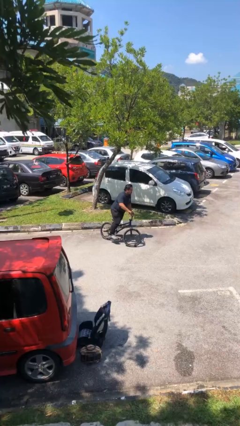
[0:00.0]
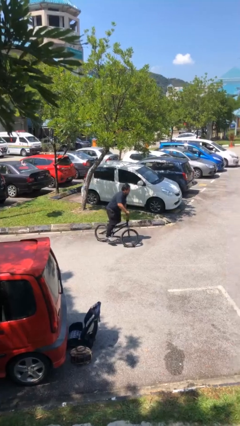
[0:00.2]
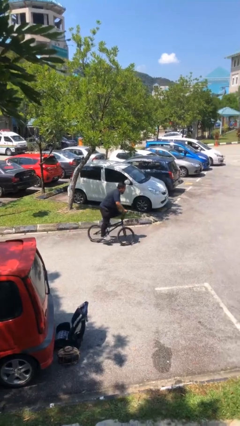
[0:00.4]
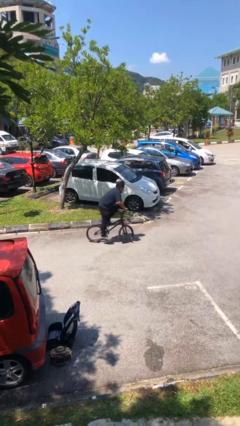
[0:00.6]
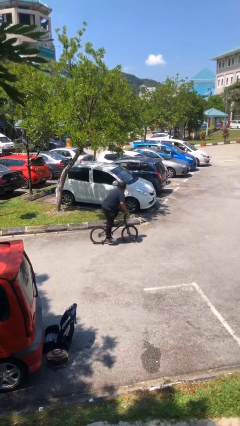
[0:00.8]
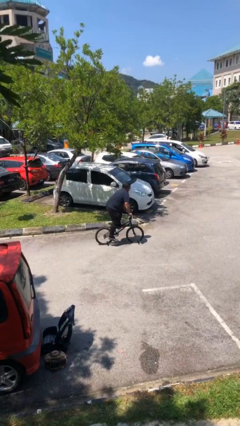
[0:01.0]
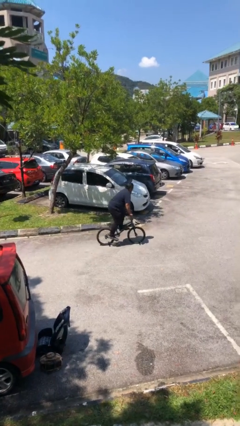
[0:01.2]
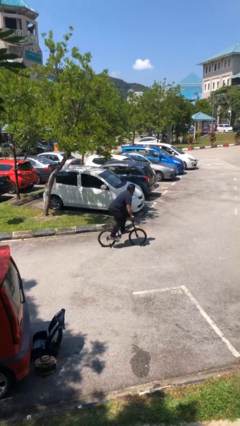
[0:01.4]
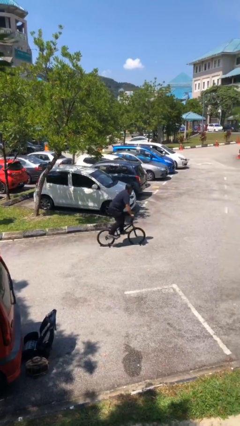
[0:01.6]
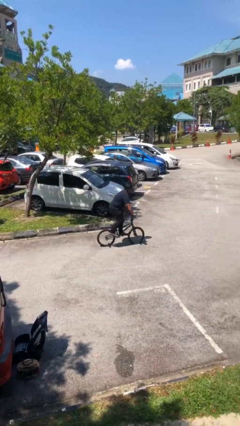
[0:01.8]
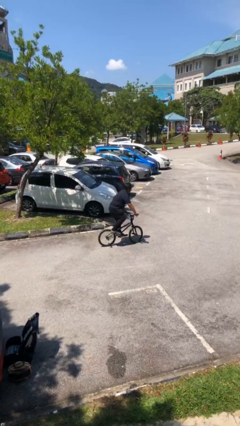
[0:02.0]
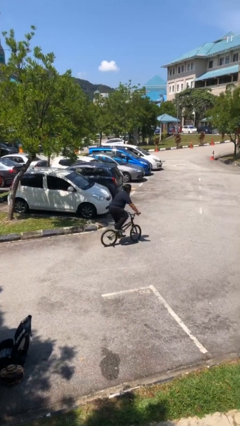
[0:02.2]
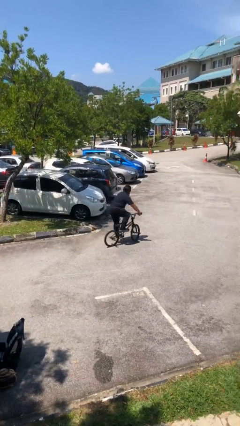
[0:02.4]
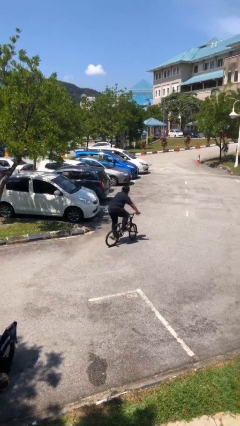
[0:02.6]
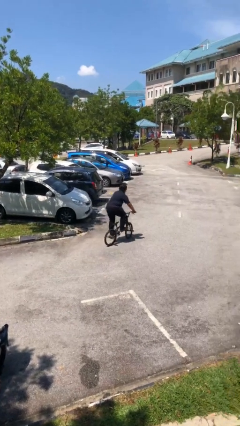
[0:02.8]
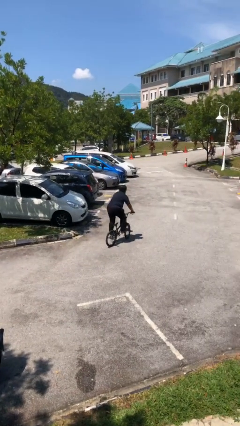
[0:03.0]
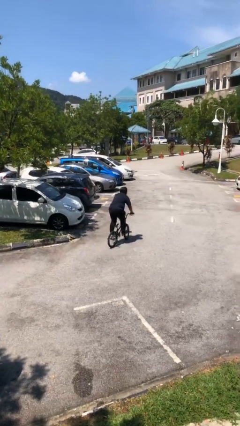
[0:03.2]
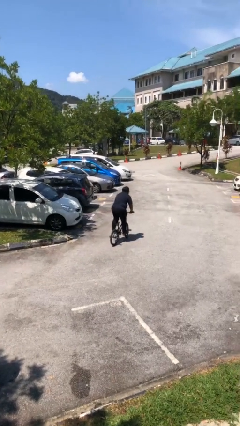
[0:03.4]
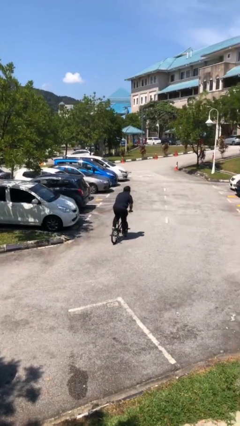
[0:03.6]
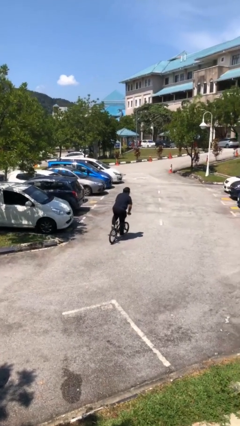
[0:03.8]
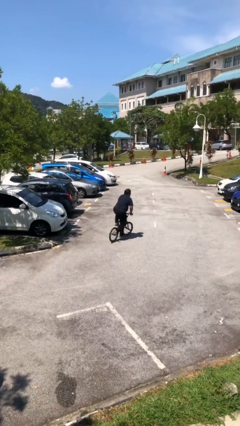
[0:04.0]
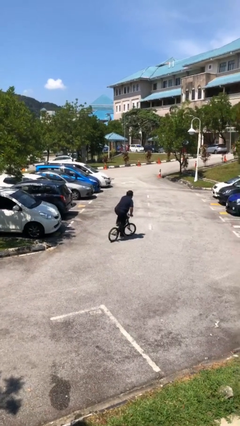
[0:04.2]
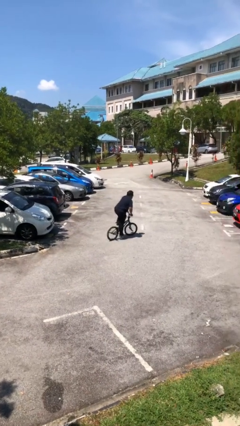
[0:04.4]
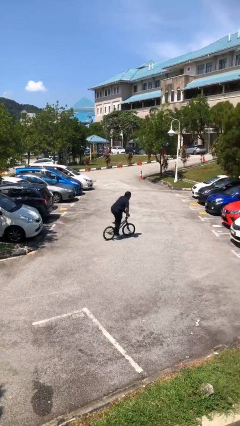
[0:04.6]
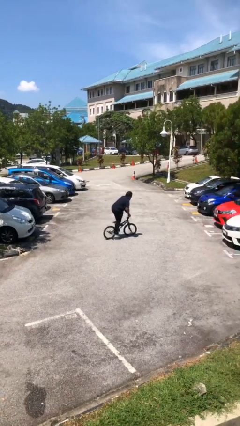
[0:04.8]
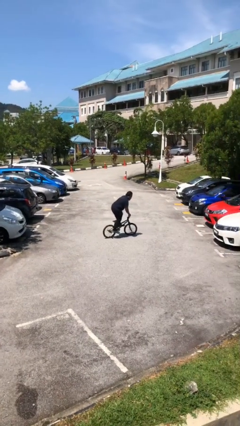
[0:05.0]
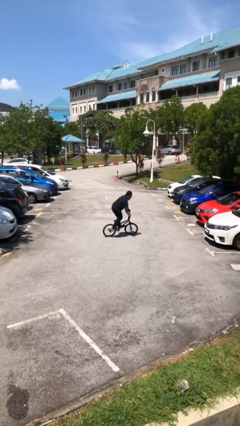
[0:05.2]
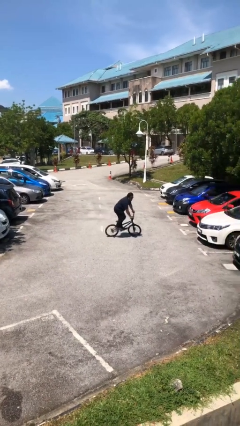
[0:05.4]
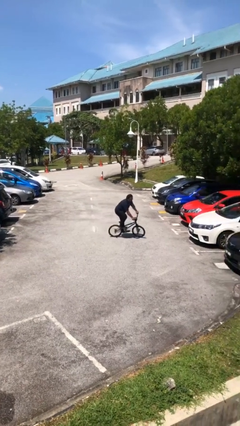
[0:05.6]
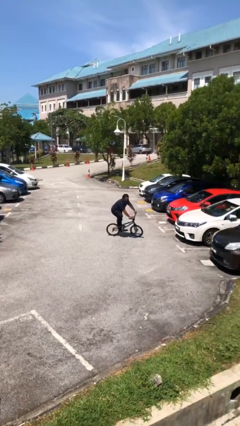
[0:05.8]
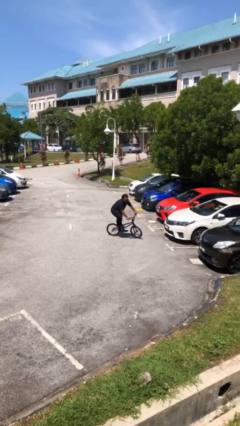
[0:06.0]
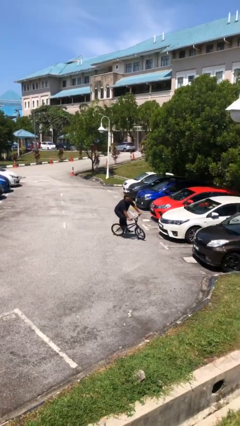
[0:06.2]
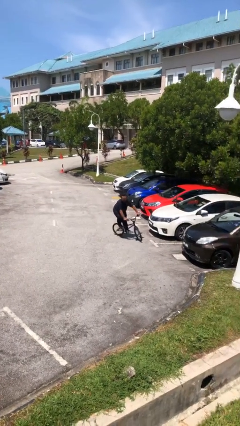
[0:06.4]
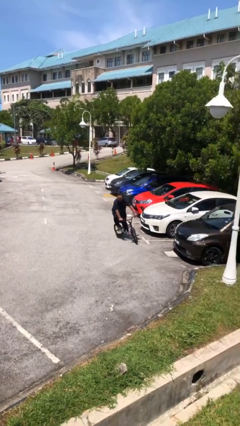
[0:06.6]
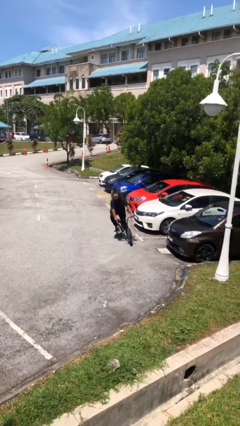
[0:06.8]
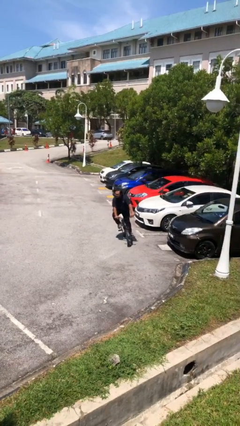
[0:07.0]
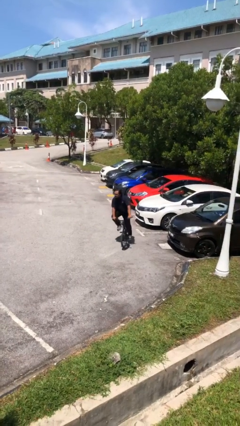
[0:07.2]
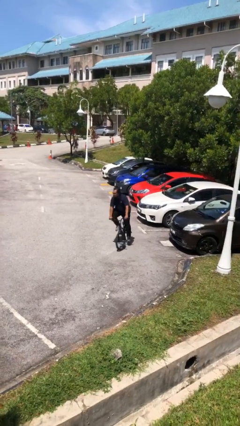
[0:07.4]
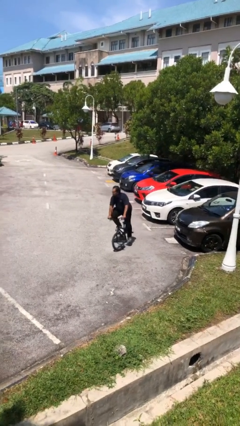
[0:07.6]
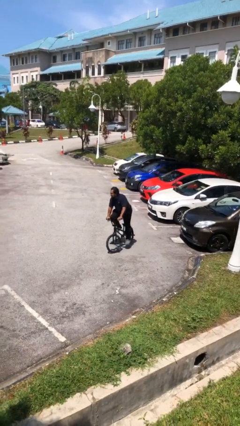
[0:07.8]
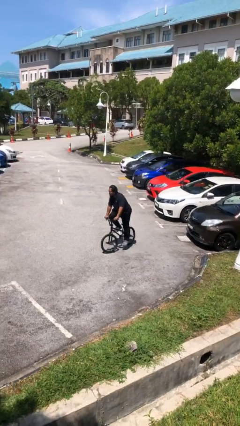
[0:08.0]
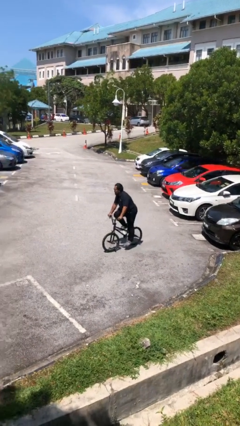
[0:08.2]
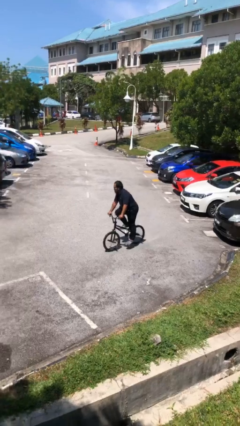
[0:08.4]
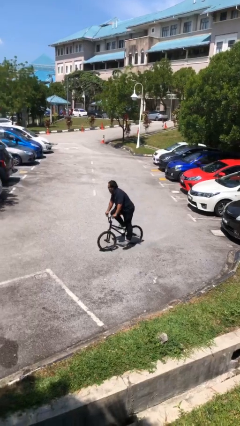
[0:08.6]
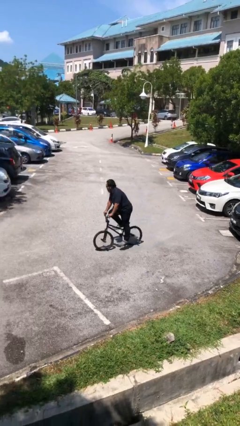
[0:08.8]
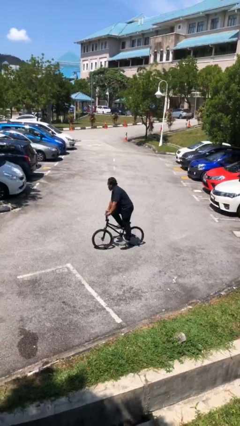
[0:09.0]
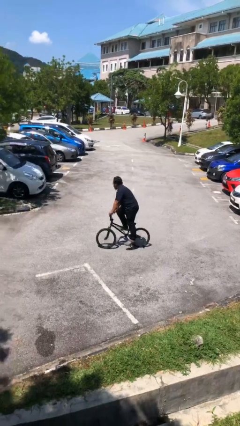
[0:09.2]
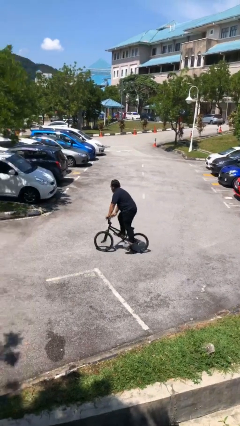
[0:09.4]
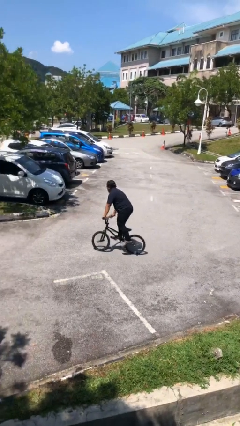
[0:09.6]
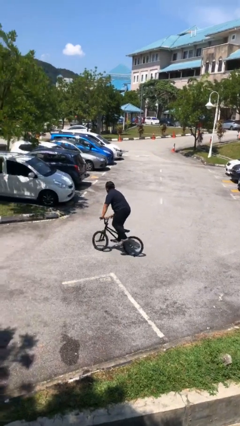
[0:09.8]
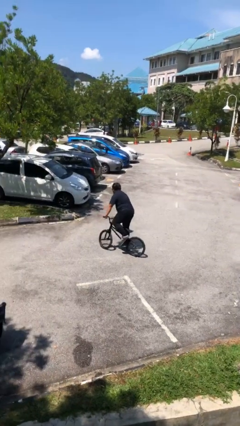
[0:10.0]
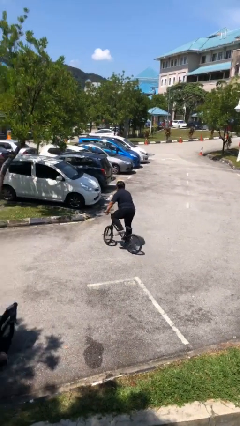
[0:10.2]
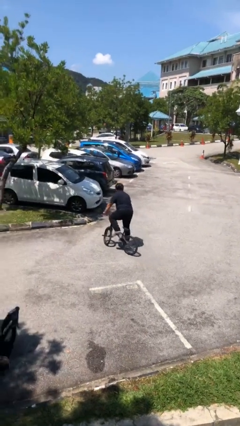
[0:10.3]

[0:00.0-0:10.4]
person rides bicycle

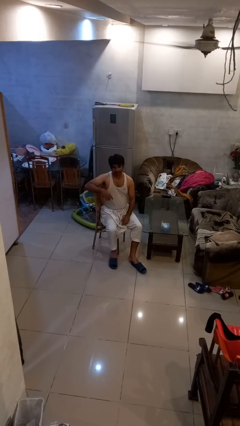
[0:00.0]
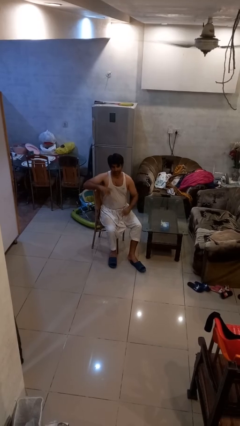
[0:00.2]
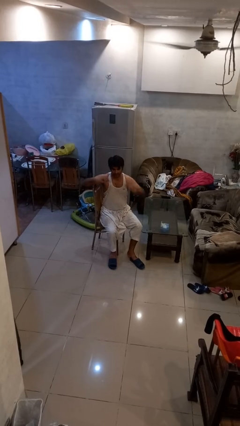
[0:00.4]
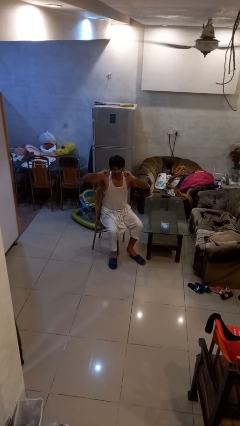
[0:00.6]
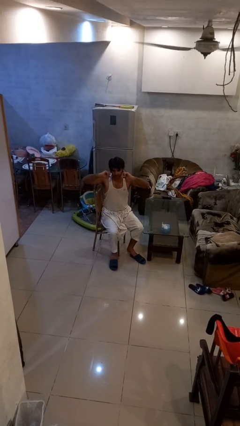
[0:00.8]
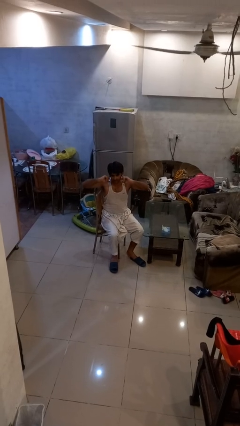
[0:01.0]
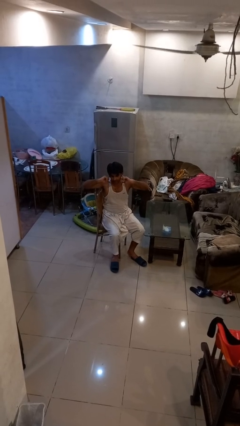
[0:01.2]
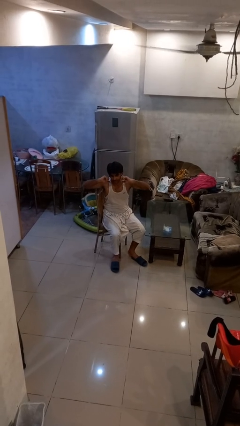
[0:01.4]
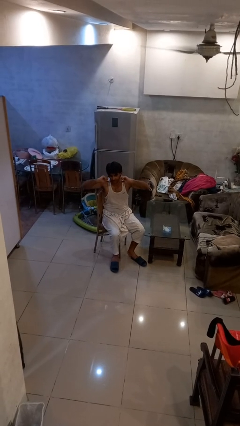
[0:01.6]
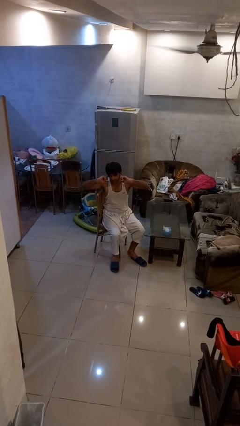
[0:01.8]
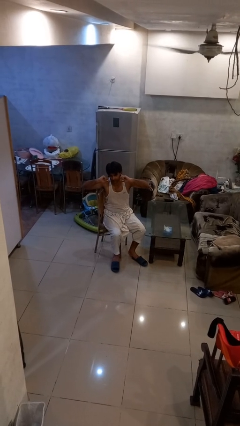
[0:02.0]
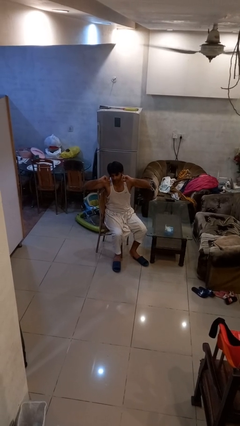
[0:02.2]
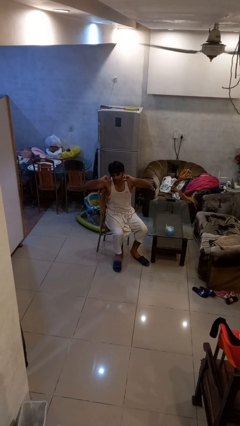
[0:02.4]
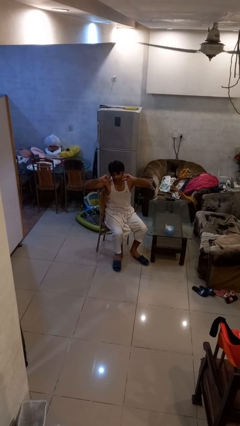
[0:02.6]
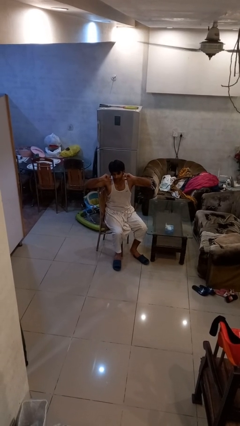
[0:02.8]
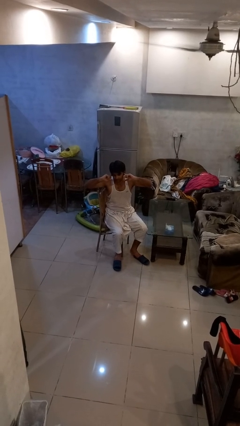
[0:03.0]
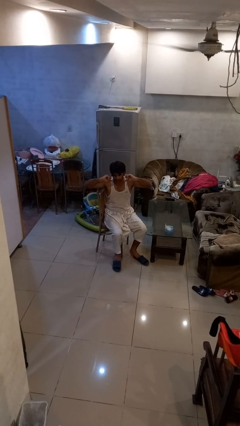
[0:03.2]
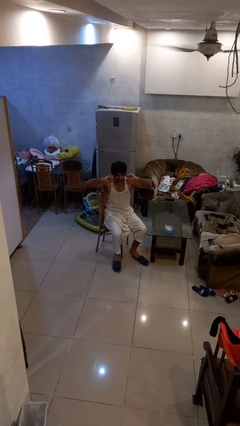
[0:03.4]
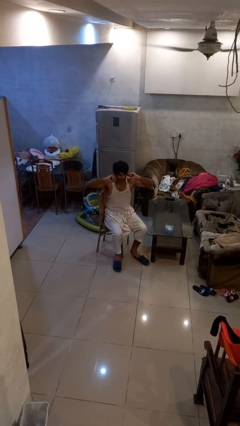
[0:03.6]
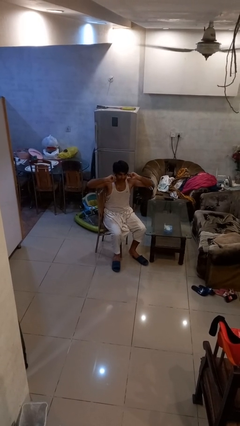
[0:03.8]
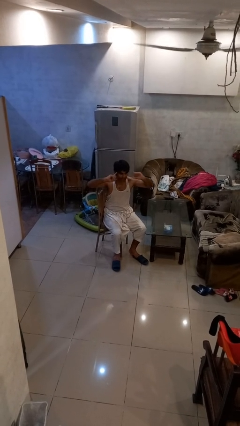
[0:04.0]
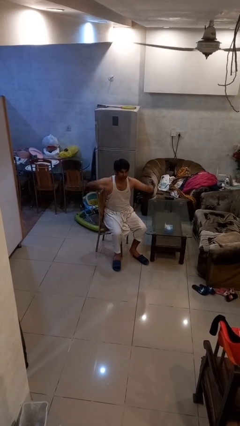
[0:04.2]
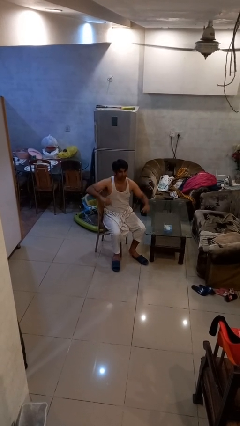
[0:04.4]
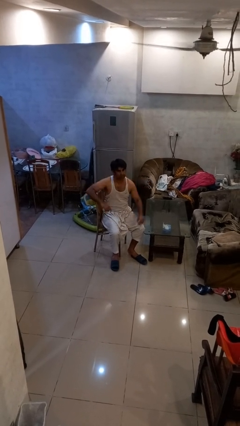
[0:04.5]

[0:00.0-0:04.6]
person puts fingers in ear

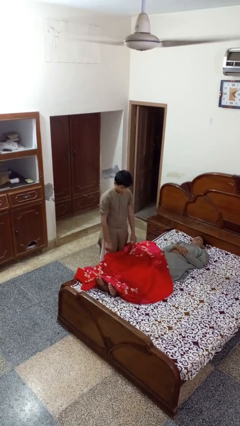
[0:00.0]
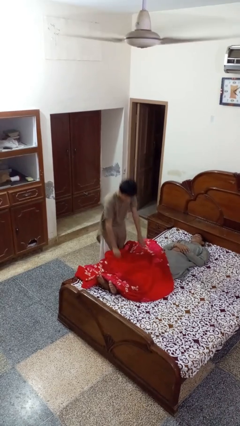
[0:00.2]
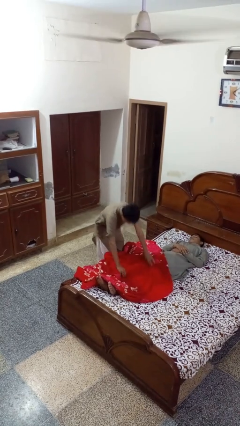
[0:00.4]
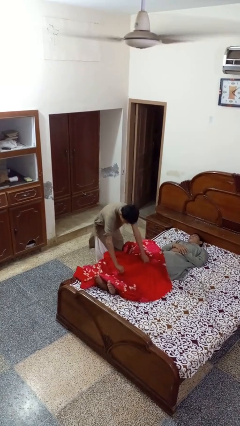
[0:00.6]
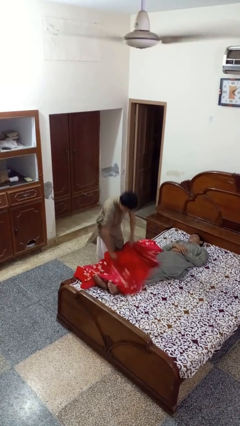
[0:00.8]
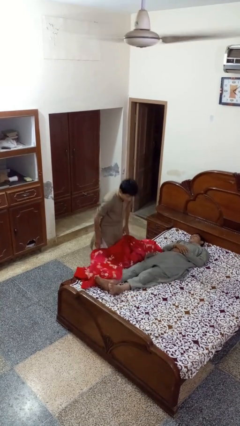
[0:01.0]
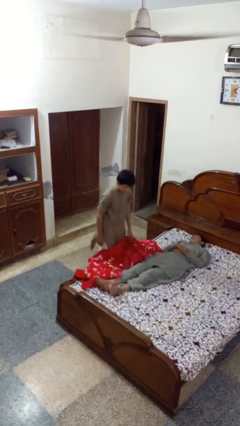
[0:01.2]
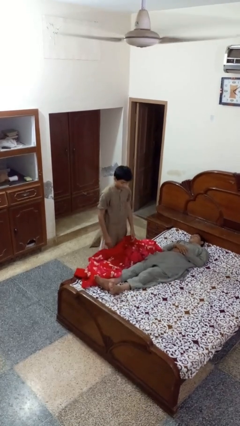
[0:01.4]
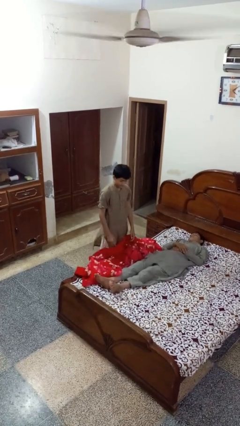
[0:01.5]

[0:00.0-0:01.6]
person uncovers friend with blanket

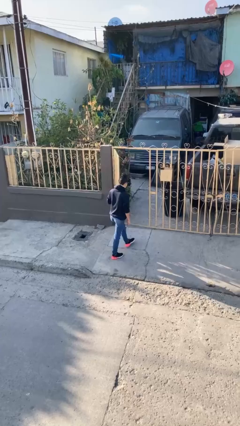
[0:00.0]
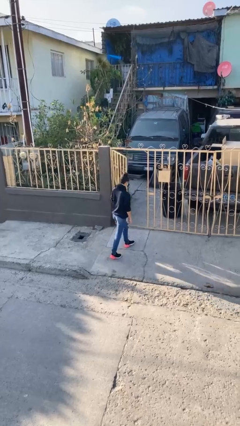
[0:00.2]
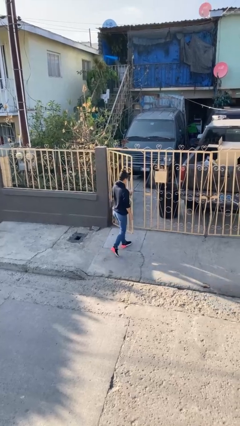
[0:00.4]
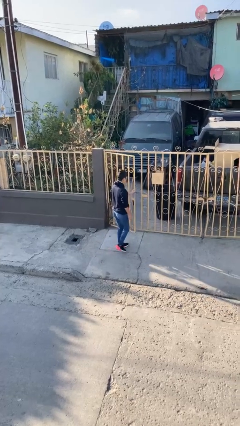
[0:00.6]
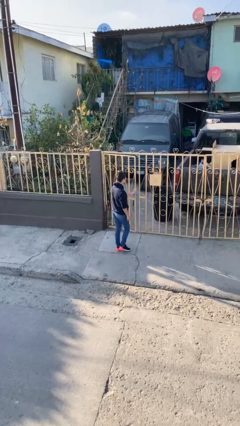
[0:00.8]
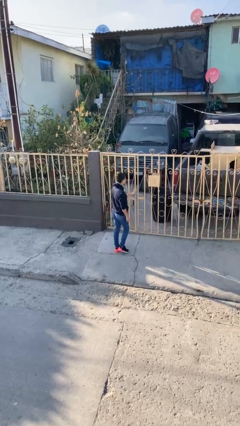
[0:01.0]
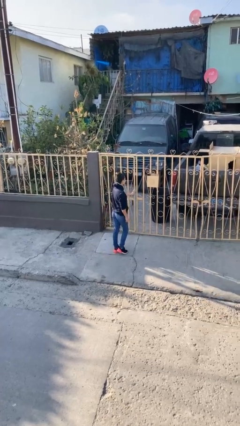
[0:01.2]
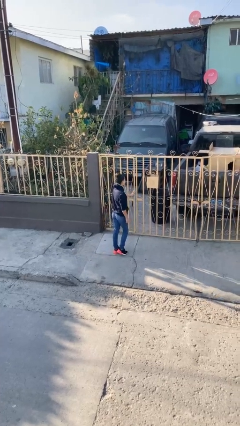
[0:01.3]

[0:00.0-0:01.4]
person closes facility door
